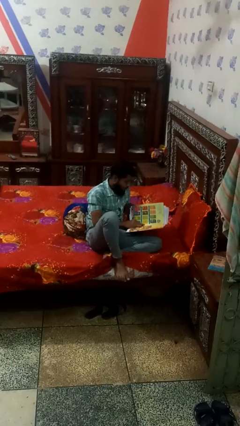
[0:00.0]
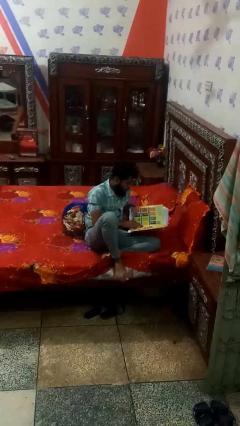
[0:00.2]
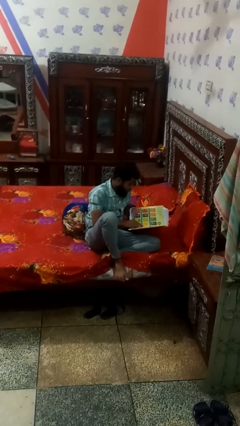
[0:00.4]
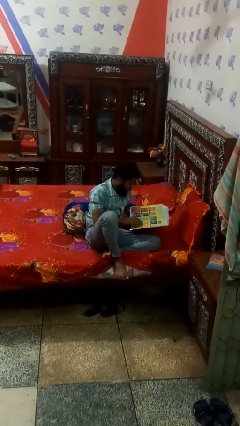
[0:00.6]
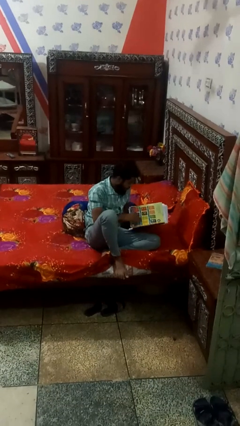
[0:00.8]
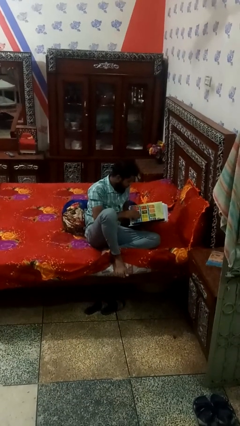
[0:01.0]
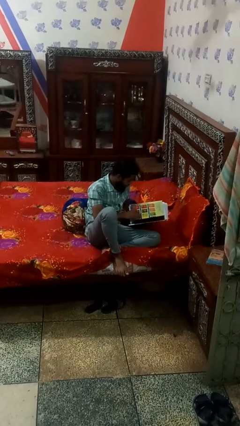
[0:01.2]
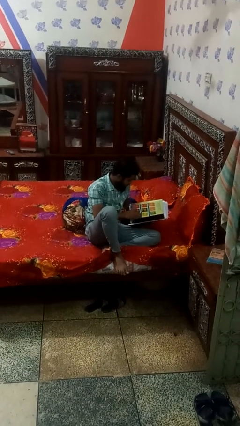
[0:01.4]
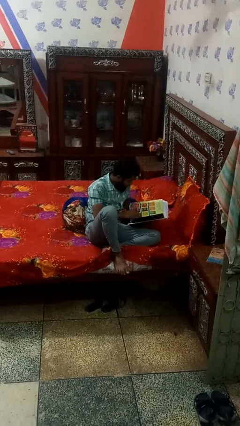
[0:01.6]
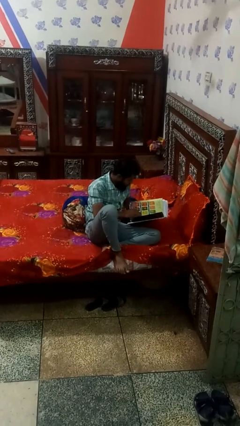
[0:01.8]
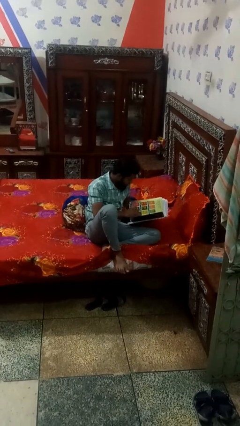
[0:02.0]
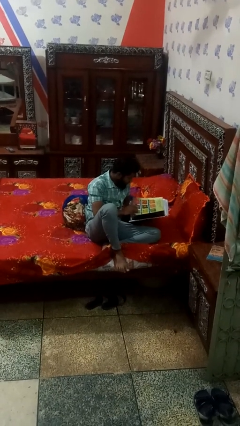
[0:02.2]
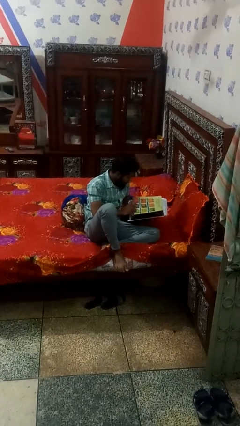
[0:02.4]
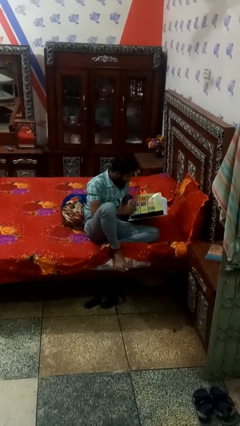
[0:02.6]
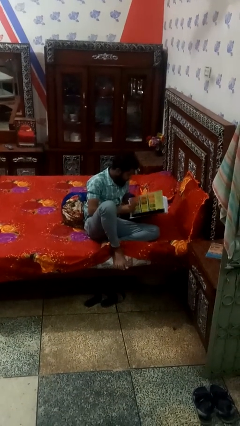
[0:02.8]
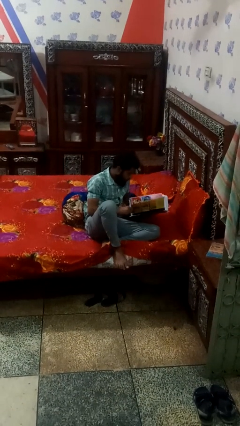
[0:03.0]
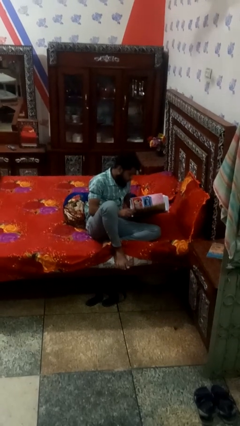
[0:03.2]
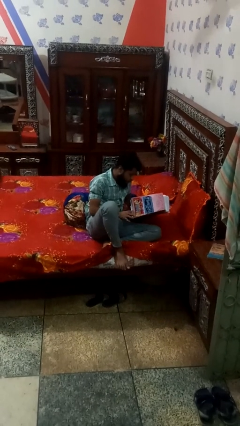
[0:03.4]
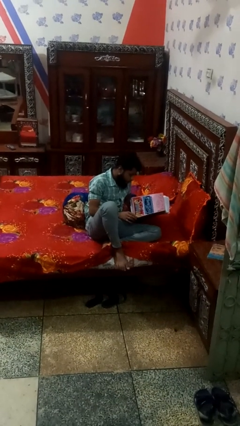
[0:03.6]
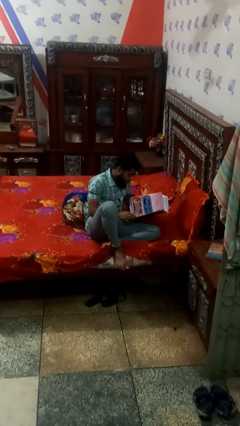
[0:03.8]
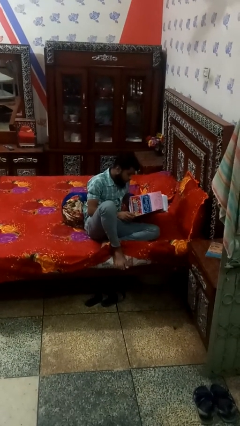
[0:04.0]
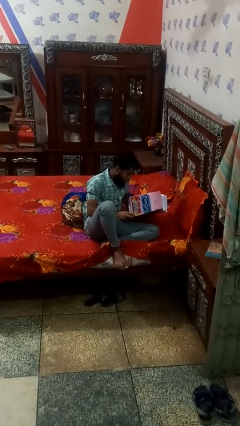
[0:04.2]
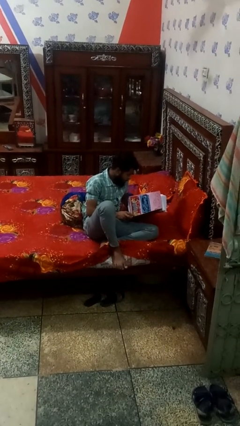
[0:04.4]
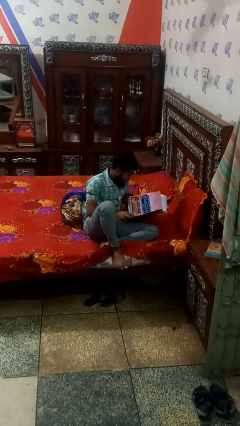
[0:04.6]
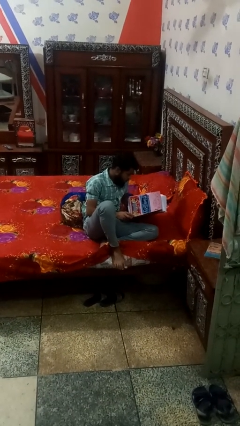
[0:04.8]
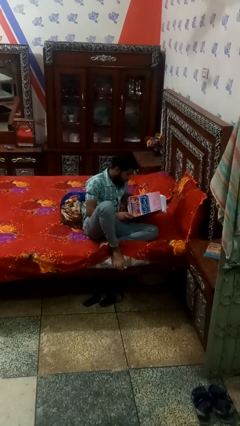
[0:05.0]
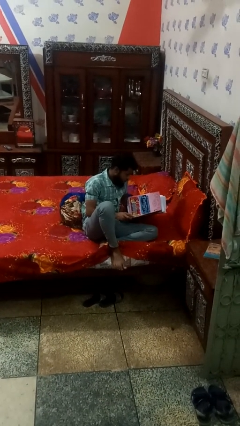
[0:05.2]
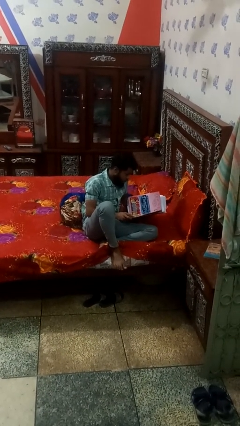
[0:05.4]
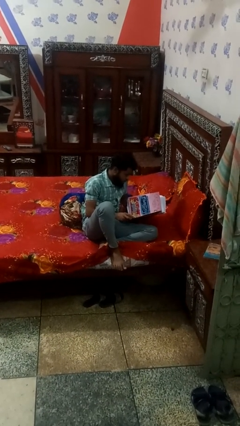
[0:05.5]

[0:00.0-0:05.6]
person reads magazine

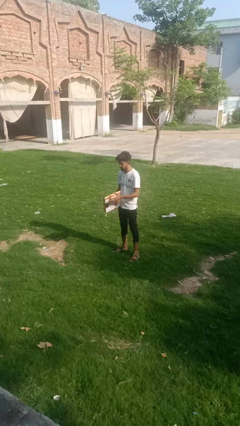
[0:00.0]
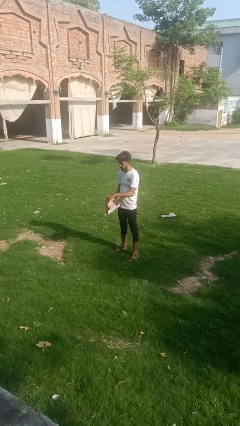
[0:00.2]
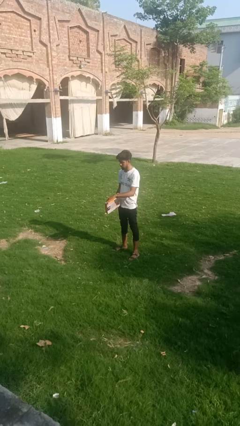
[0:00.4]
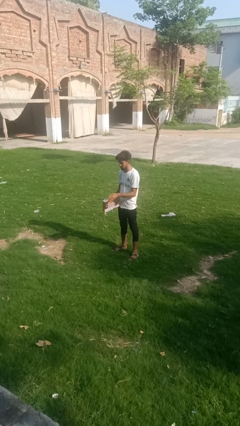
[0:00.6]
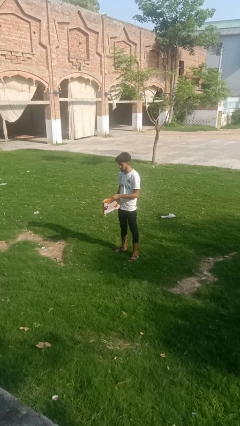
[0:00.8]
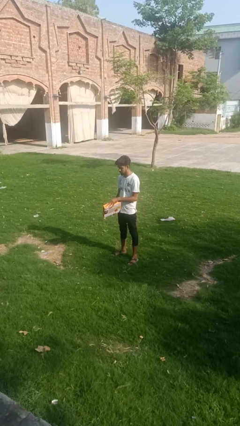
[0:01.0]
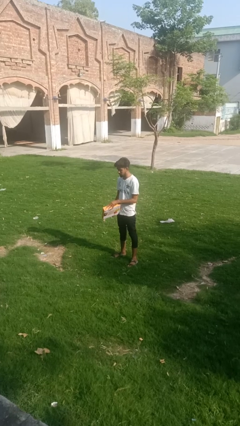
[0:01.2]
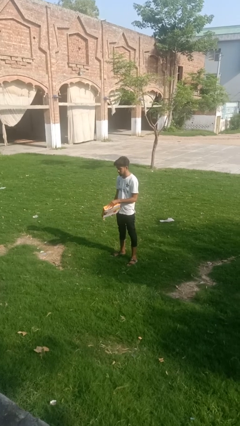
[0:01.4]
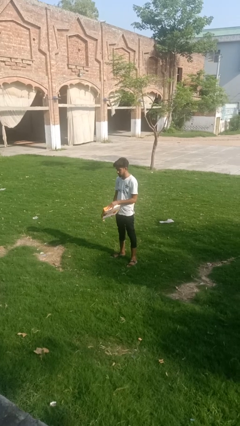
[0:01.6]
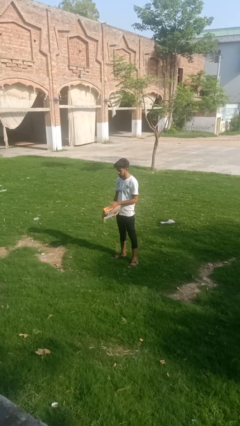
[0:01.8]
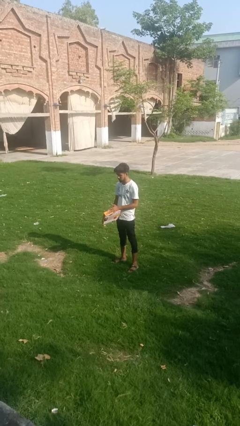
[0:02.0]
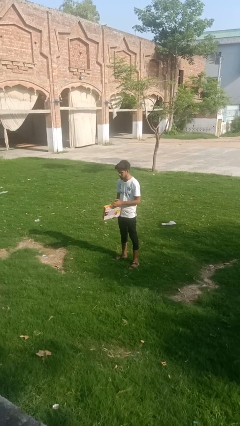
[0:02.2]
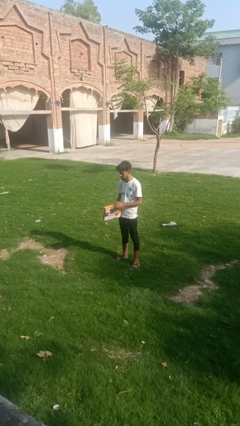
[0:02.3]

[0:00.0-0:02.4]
person closes mailbox

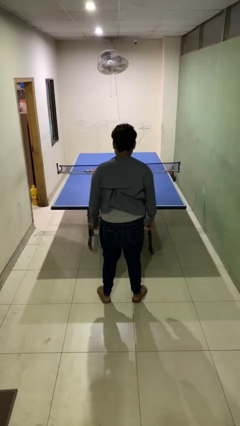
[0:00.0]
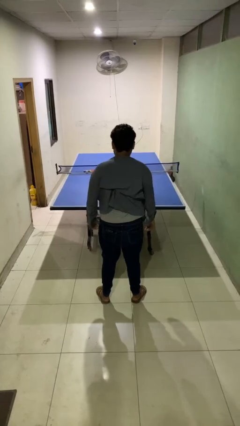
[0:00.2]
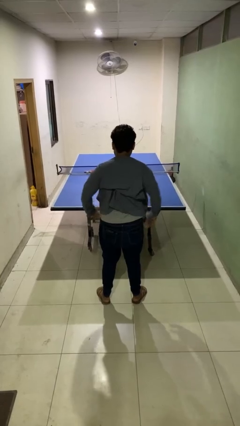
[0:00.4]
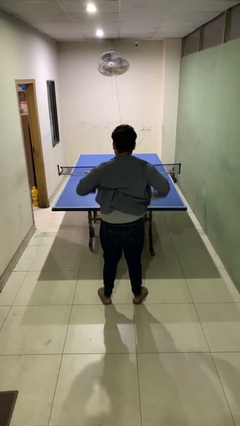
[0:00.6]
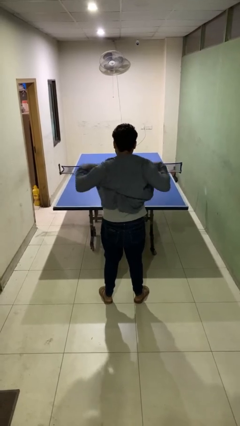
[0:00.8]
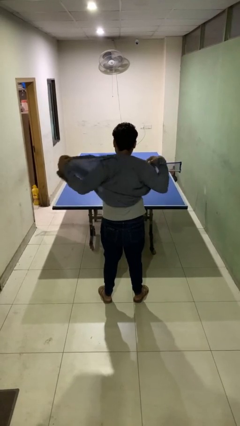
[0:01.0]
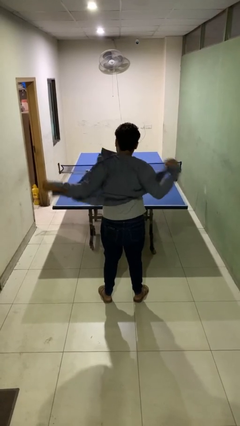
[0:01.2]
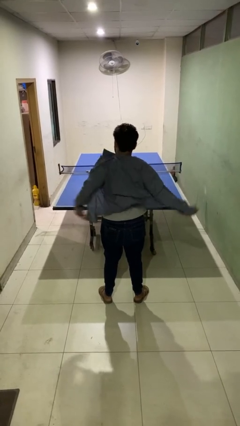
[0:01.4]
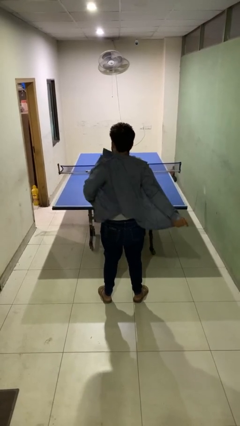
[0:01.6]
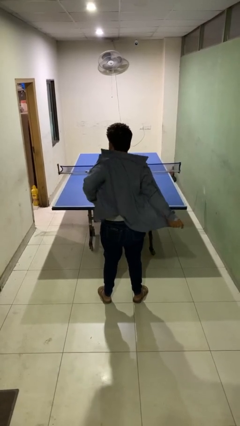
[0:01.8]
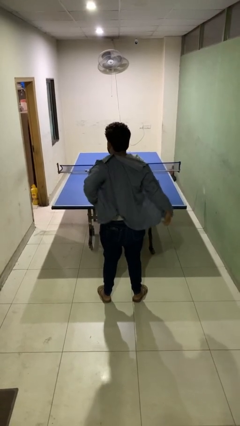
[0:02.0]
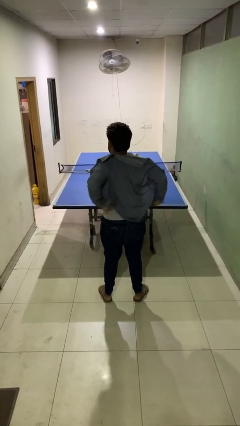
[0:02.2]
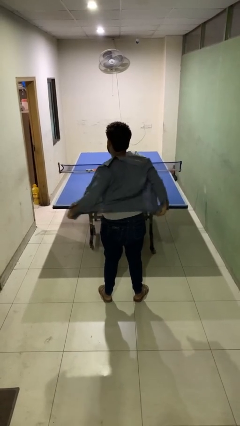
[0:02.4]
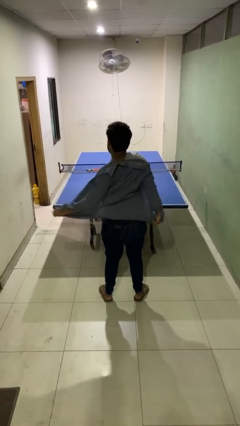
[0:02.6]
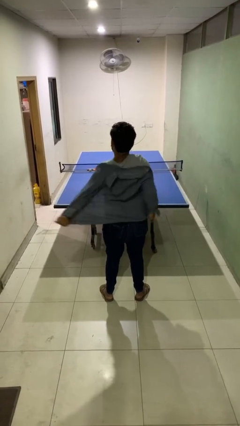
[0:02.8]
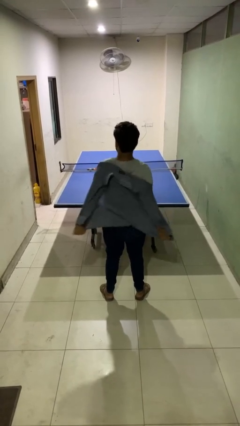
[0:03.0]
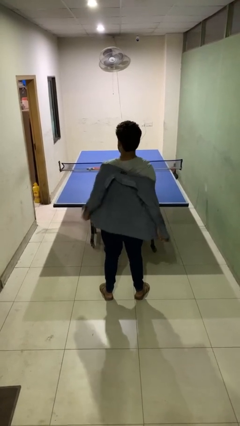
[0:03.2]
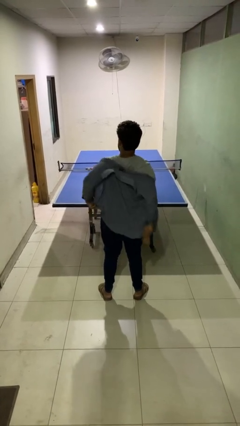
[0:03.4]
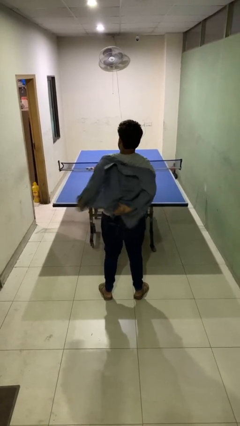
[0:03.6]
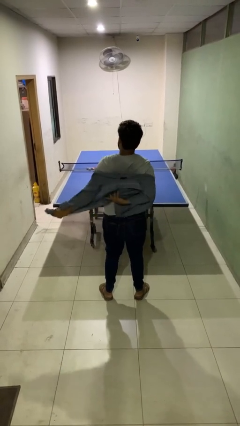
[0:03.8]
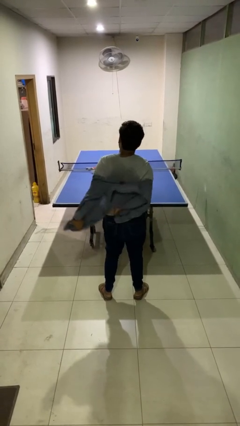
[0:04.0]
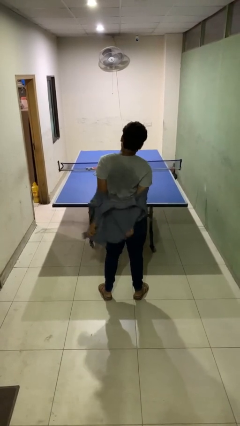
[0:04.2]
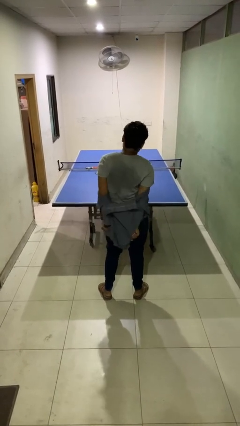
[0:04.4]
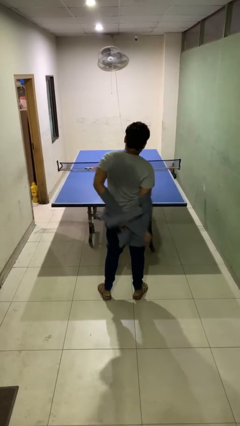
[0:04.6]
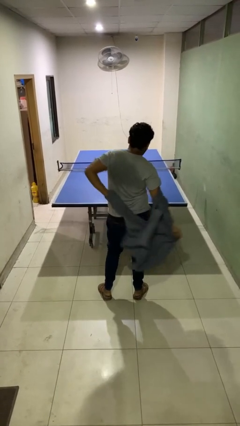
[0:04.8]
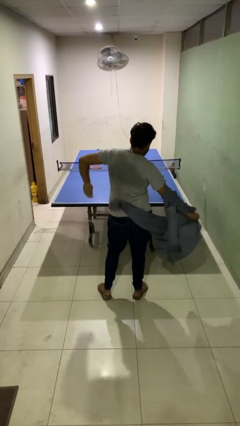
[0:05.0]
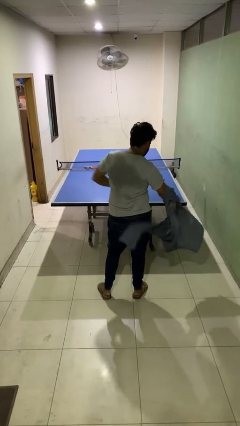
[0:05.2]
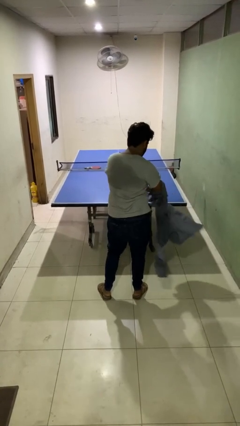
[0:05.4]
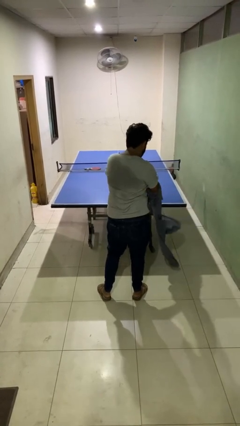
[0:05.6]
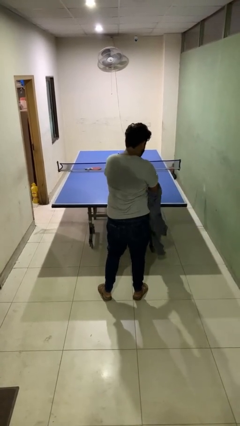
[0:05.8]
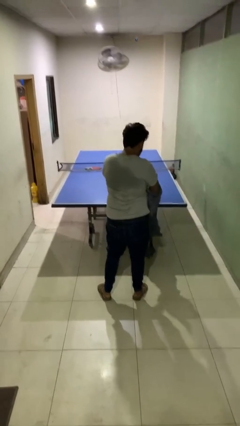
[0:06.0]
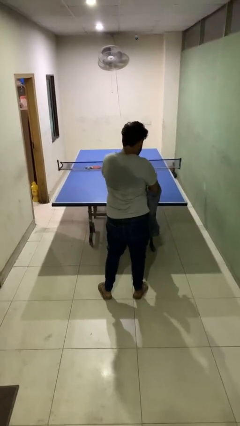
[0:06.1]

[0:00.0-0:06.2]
person takes off shirt

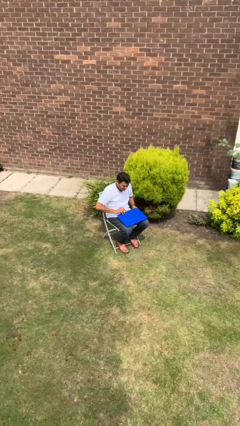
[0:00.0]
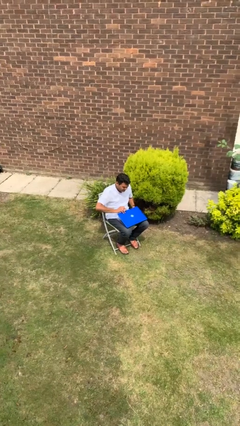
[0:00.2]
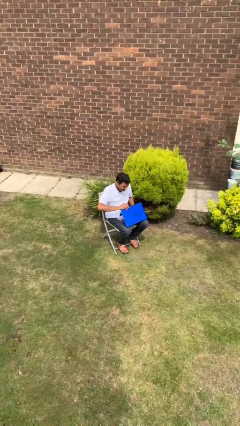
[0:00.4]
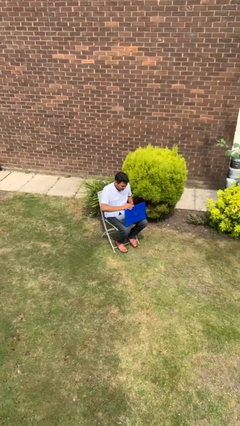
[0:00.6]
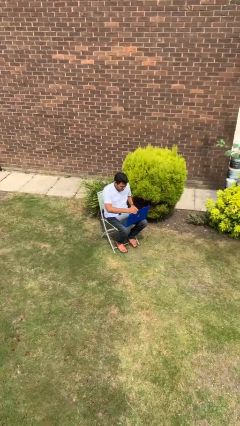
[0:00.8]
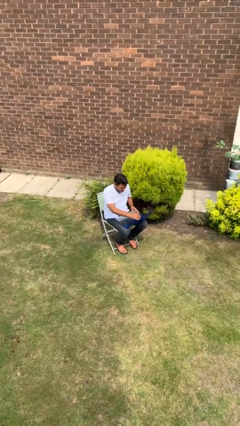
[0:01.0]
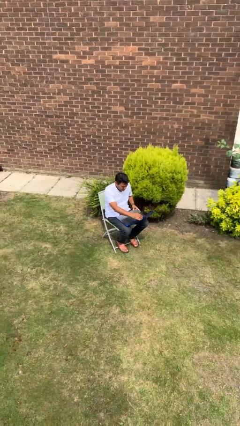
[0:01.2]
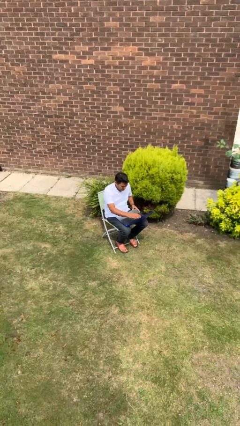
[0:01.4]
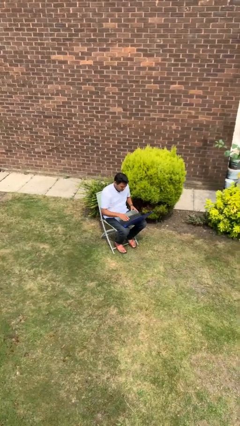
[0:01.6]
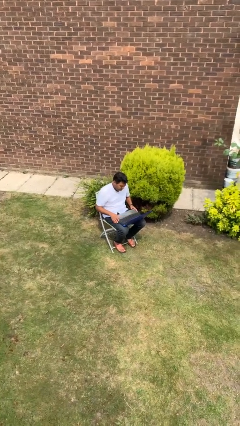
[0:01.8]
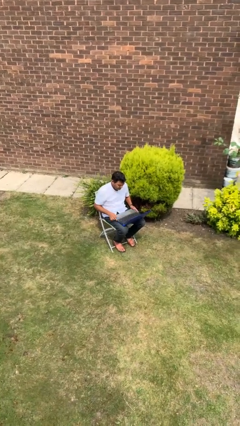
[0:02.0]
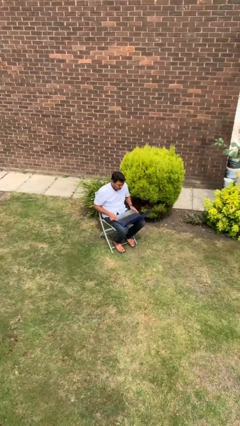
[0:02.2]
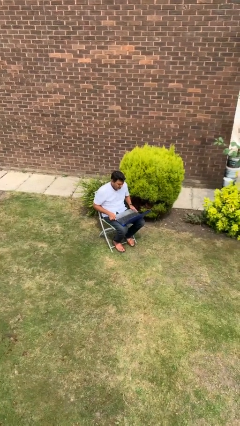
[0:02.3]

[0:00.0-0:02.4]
person opens laptop

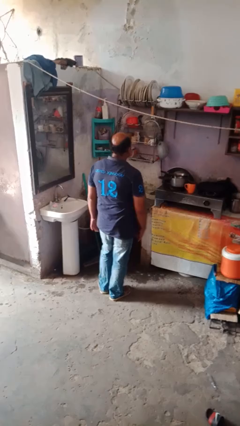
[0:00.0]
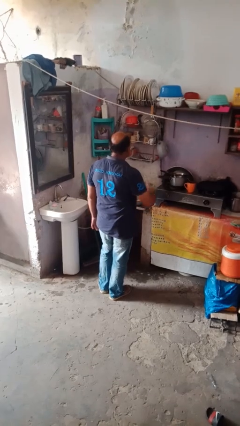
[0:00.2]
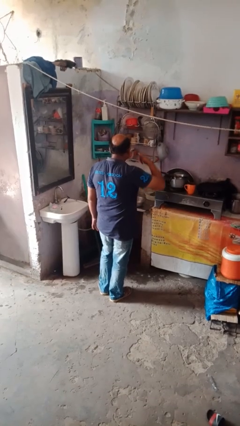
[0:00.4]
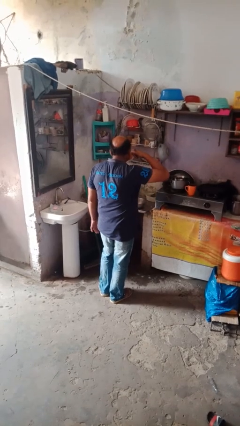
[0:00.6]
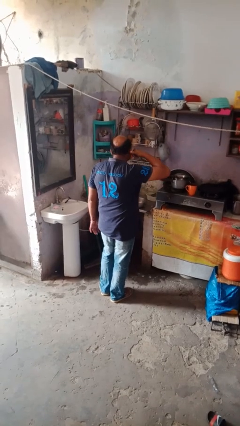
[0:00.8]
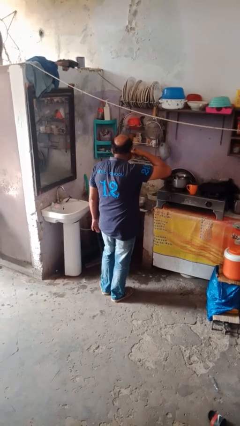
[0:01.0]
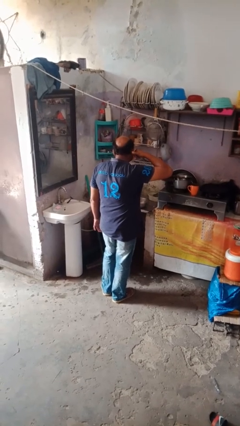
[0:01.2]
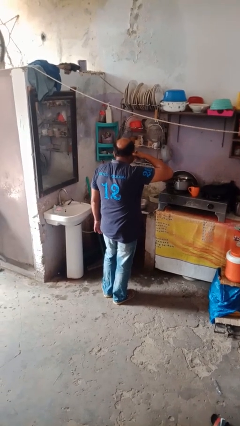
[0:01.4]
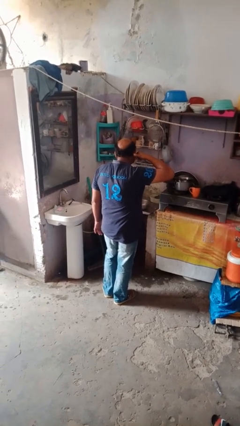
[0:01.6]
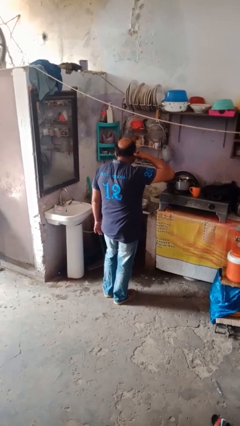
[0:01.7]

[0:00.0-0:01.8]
person gestures call me
